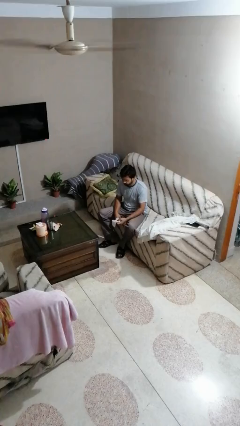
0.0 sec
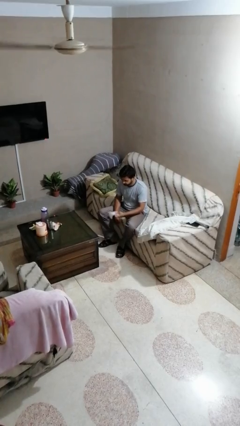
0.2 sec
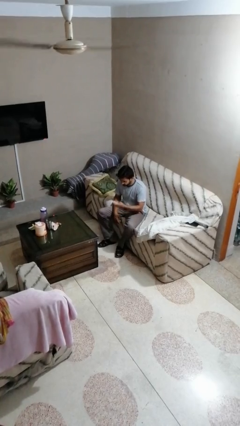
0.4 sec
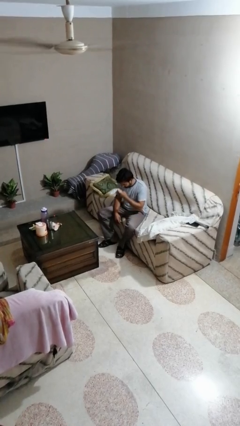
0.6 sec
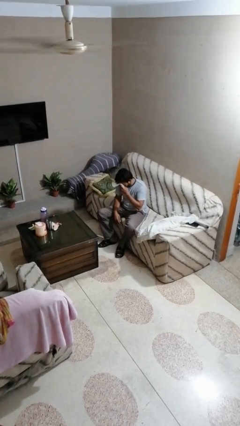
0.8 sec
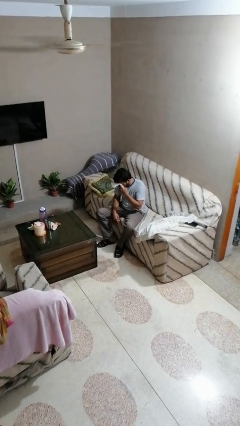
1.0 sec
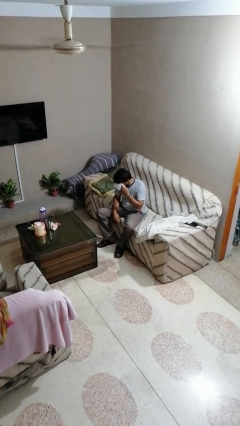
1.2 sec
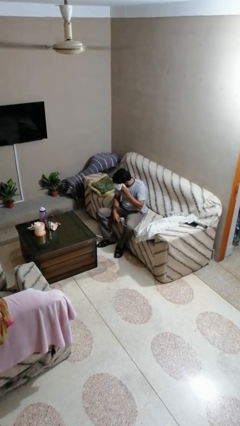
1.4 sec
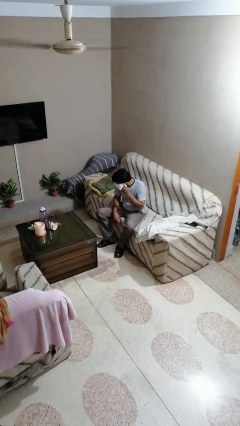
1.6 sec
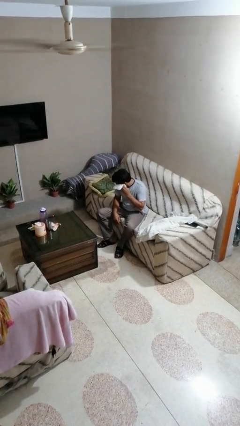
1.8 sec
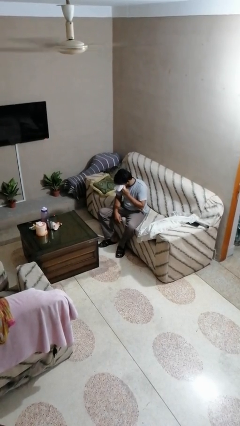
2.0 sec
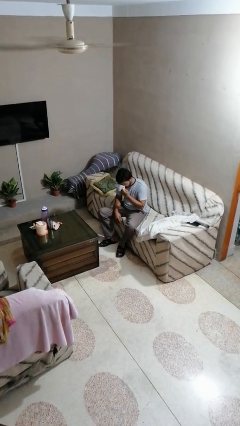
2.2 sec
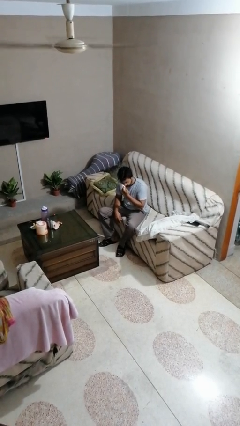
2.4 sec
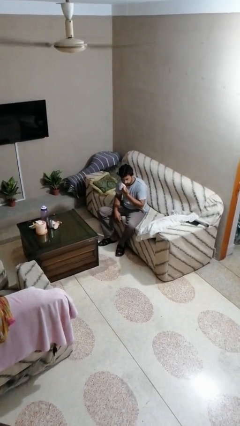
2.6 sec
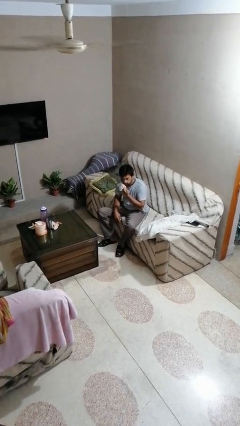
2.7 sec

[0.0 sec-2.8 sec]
person wipes mouth with napkin

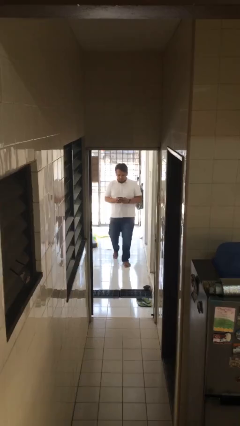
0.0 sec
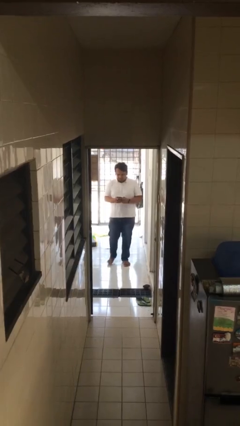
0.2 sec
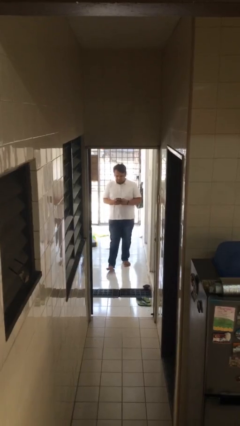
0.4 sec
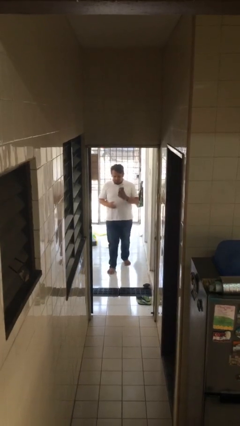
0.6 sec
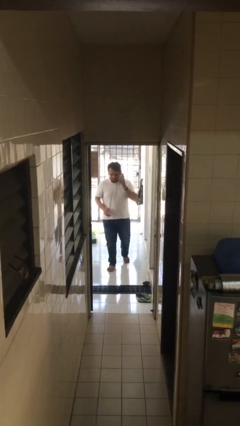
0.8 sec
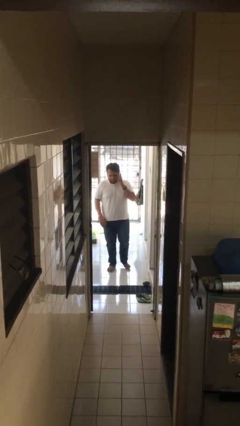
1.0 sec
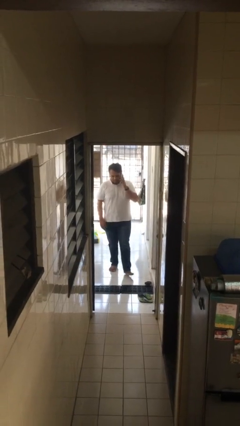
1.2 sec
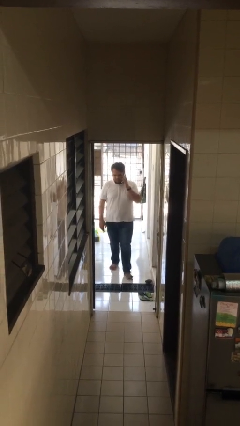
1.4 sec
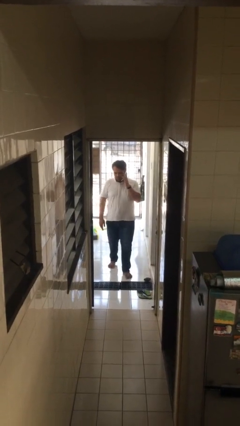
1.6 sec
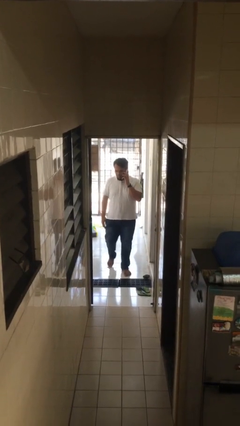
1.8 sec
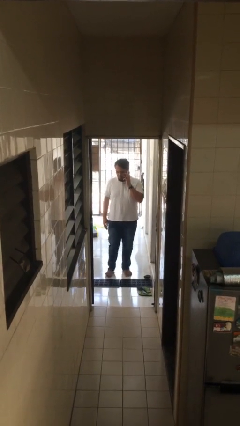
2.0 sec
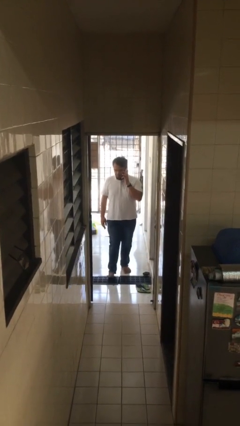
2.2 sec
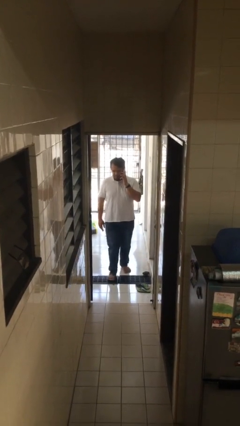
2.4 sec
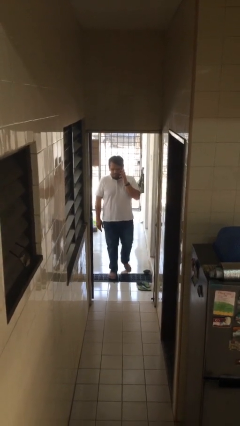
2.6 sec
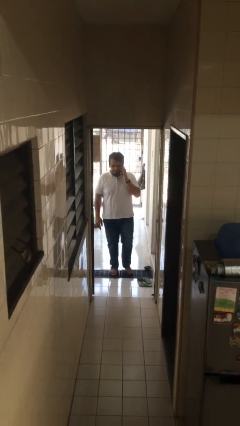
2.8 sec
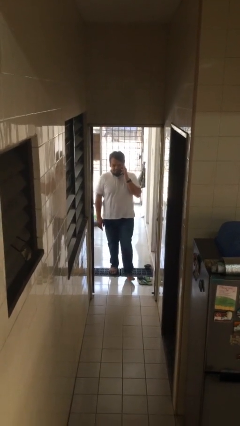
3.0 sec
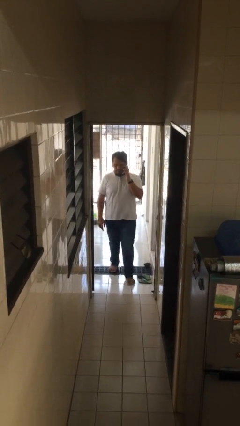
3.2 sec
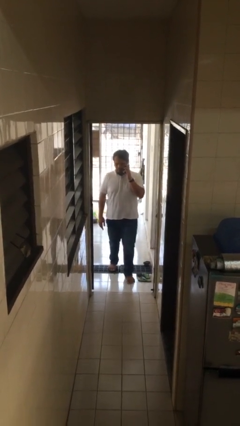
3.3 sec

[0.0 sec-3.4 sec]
person talks on phone

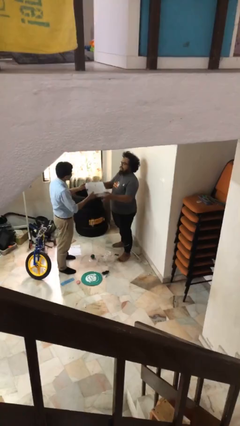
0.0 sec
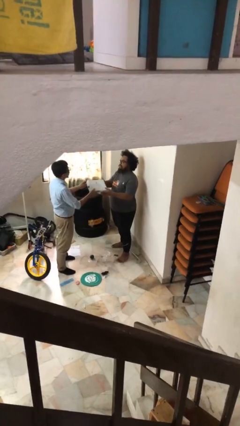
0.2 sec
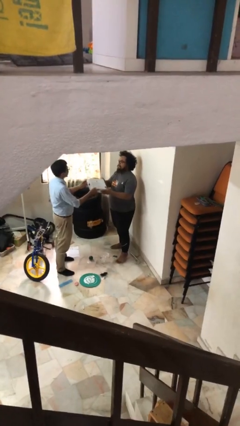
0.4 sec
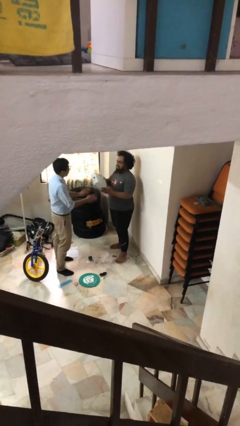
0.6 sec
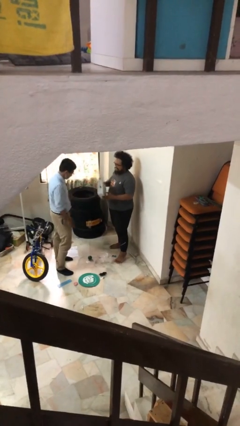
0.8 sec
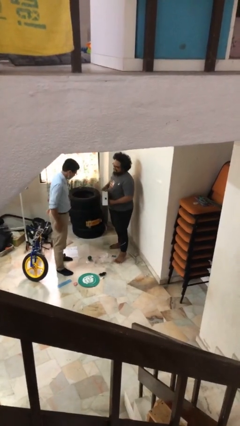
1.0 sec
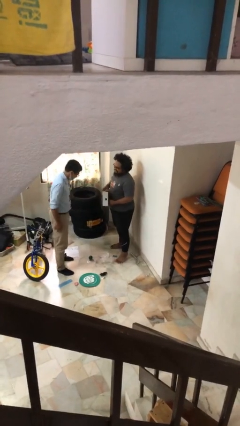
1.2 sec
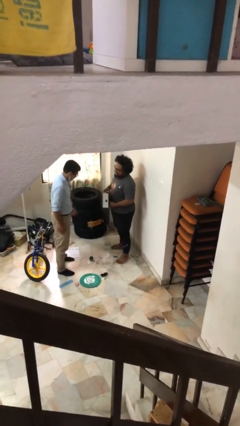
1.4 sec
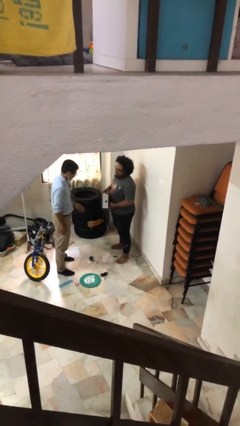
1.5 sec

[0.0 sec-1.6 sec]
person transfers object to person

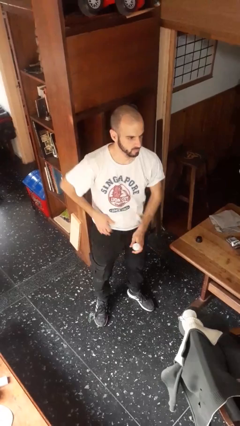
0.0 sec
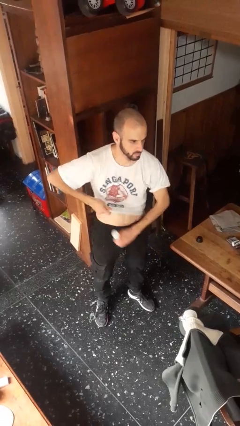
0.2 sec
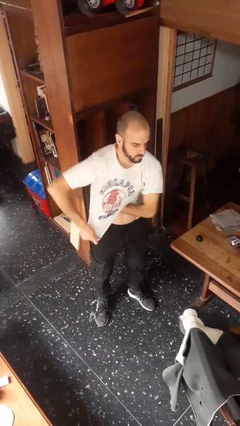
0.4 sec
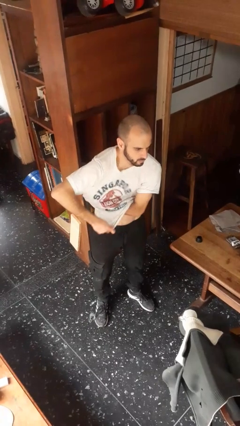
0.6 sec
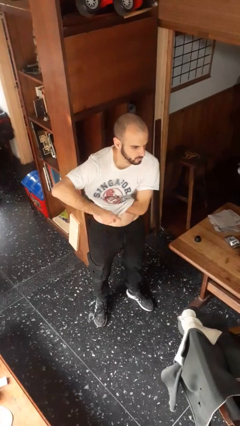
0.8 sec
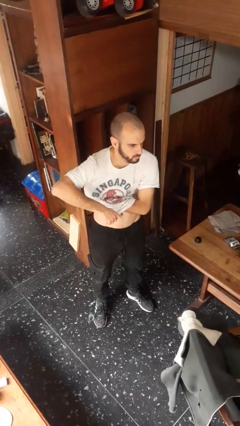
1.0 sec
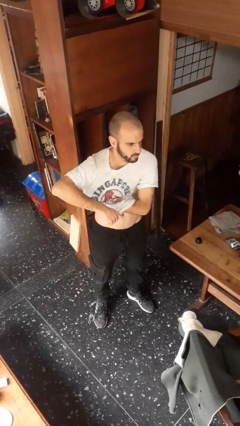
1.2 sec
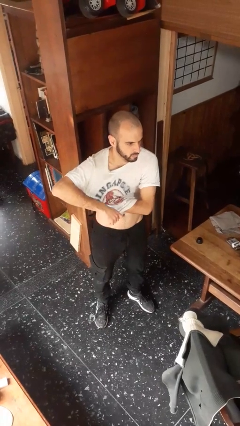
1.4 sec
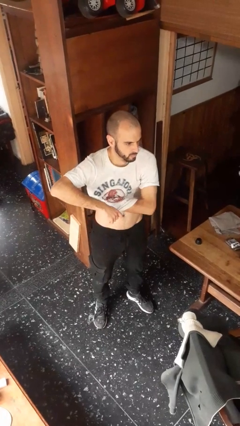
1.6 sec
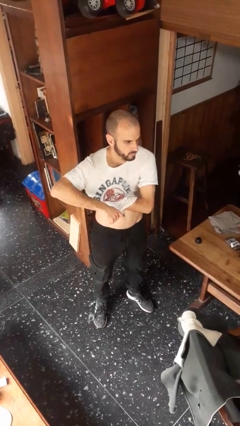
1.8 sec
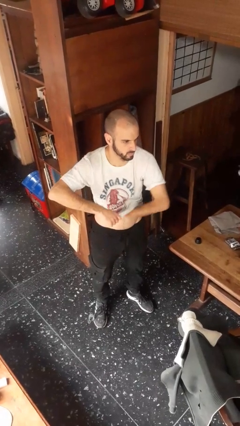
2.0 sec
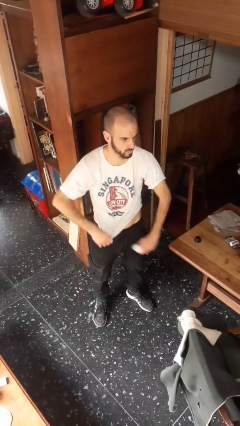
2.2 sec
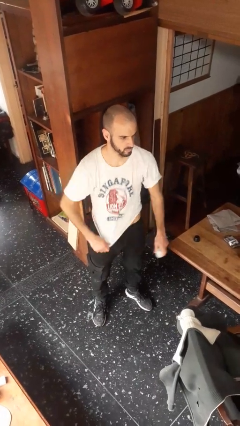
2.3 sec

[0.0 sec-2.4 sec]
person applies deodorant

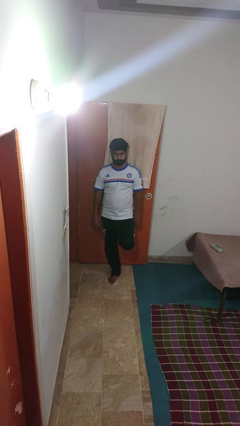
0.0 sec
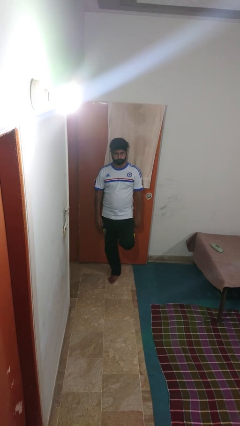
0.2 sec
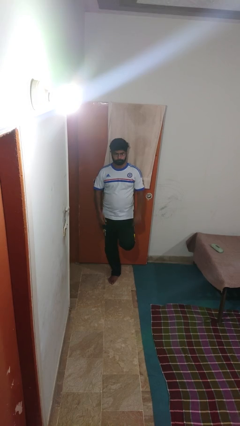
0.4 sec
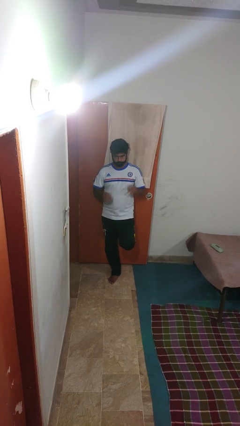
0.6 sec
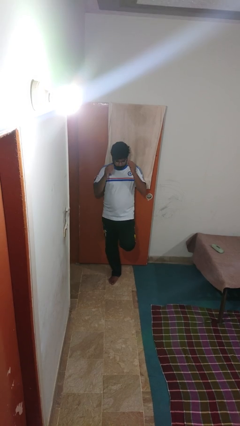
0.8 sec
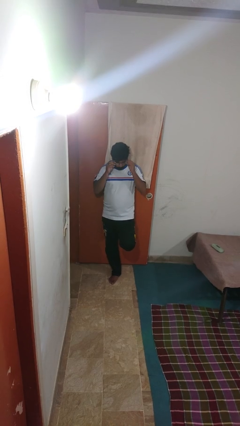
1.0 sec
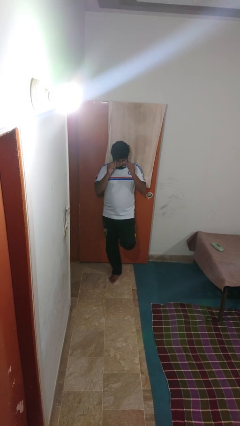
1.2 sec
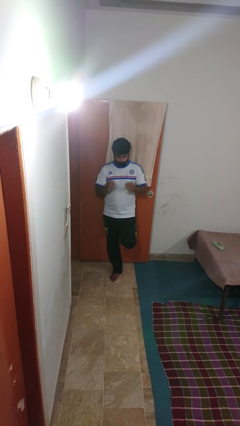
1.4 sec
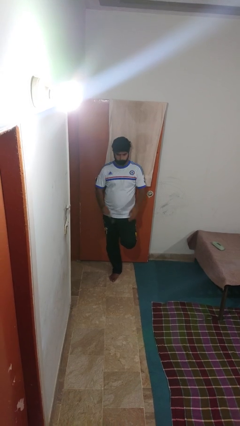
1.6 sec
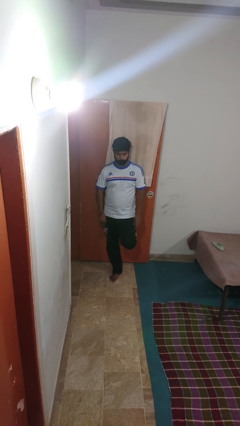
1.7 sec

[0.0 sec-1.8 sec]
person takes off glasses

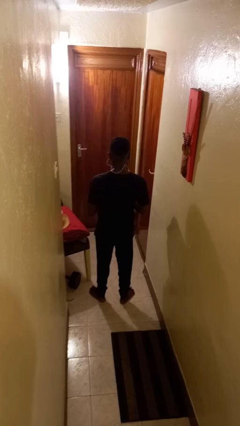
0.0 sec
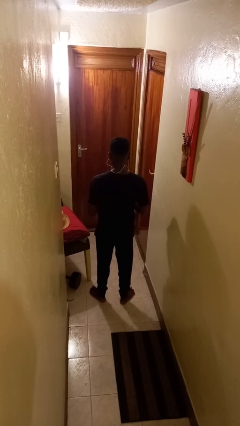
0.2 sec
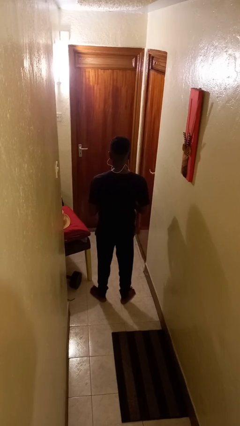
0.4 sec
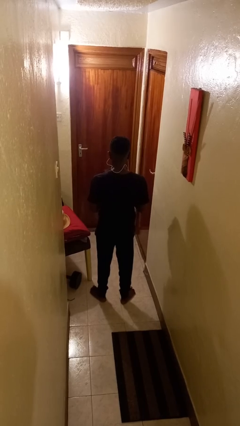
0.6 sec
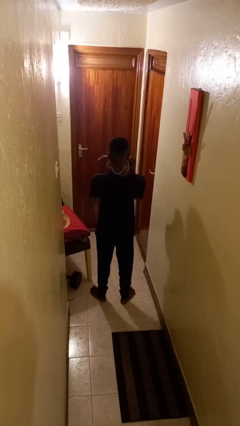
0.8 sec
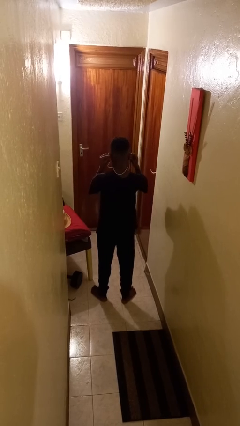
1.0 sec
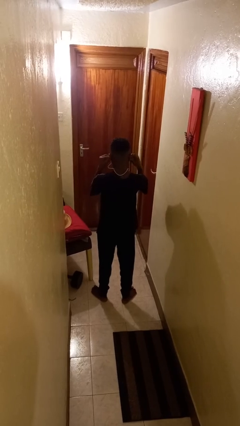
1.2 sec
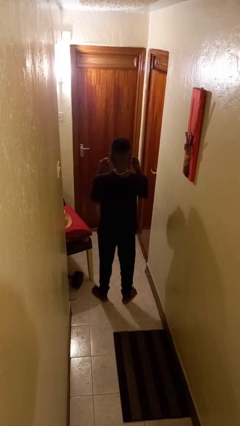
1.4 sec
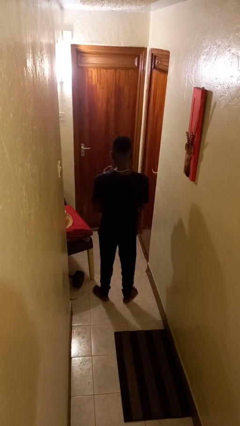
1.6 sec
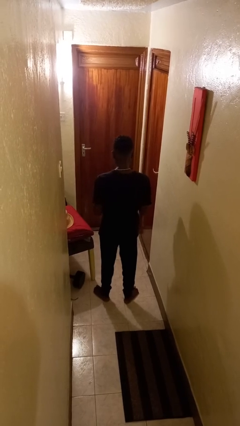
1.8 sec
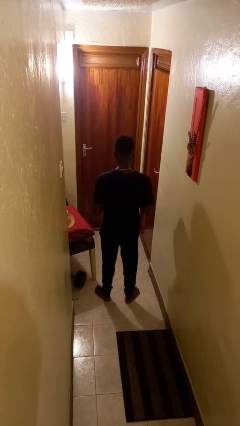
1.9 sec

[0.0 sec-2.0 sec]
person takes off headphones

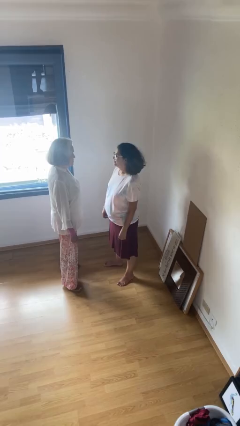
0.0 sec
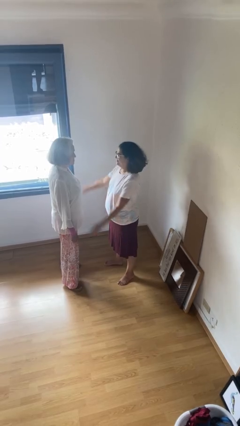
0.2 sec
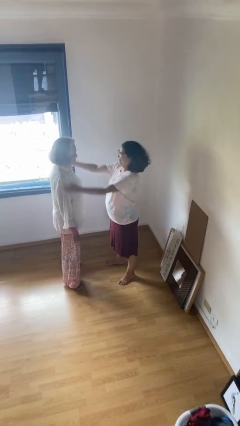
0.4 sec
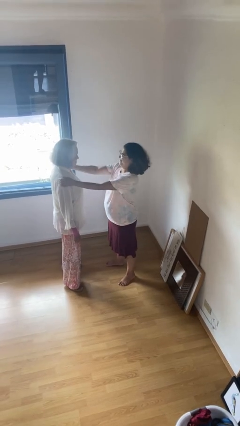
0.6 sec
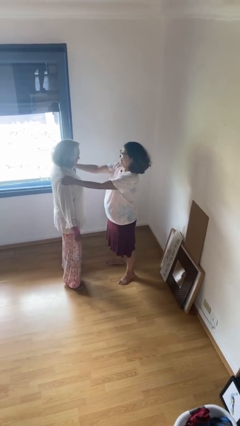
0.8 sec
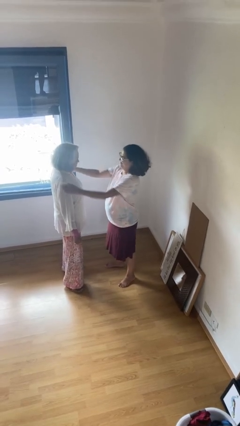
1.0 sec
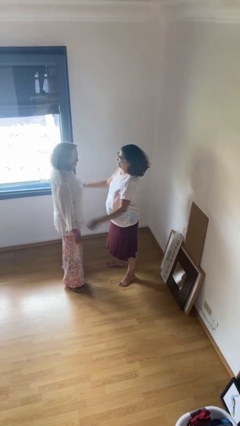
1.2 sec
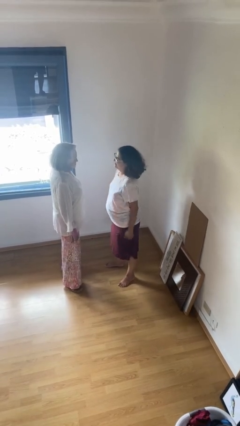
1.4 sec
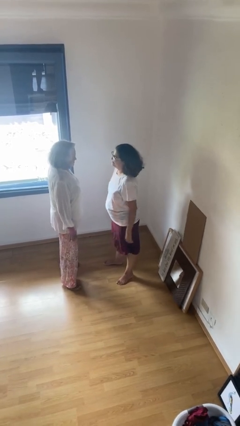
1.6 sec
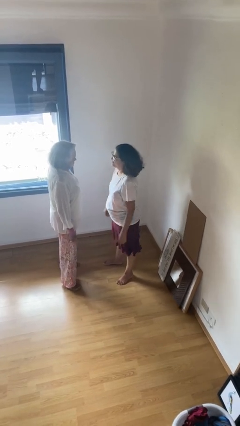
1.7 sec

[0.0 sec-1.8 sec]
person pounds shoulders of person

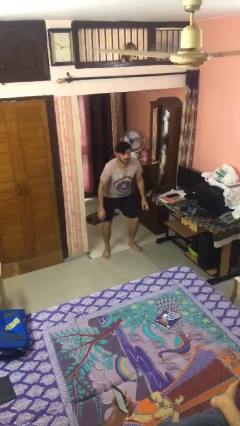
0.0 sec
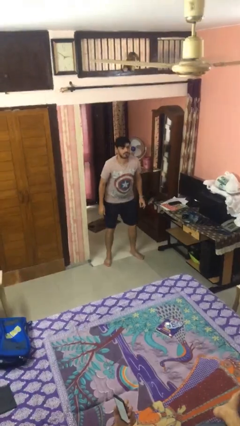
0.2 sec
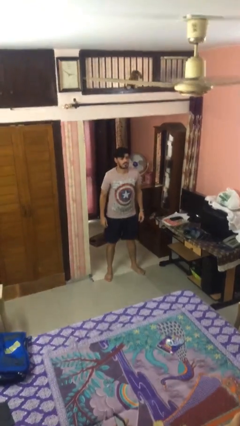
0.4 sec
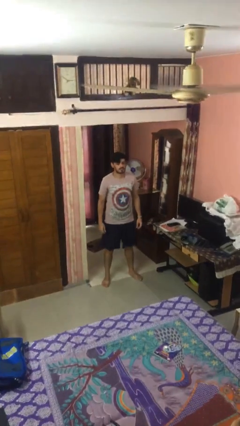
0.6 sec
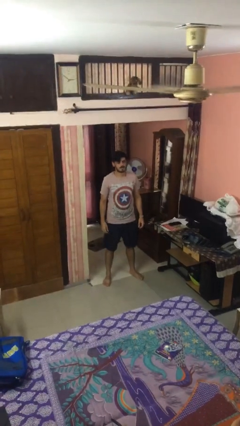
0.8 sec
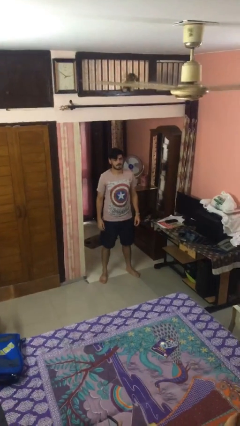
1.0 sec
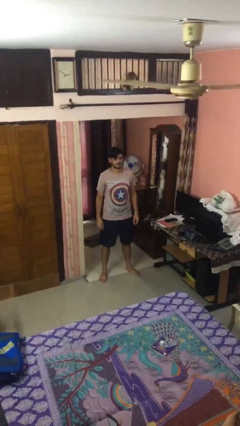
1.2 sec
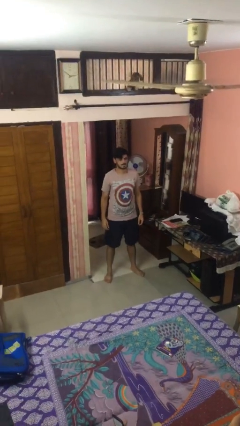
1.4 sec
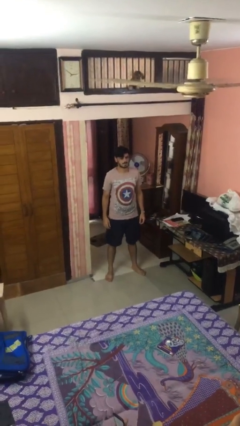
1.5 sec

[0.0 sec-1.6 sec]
person stands up
